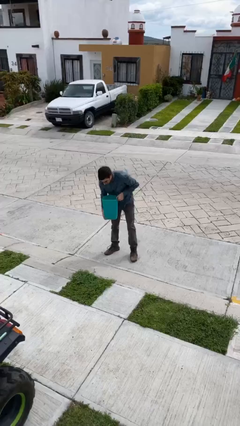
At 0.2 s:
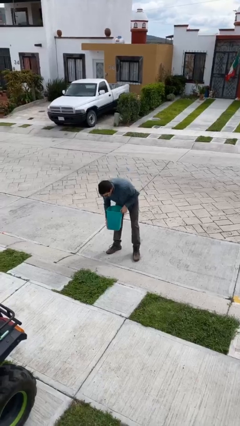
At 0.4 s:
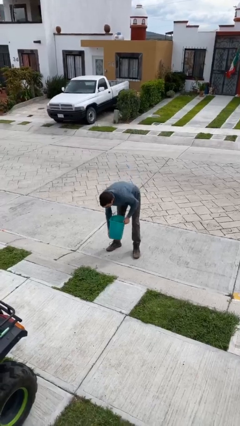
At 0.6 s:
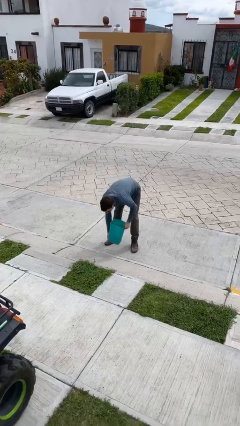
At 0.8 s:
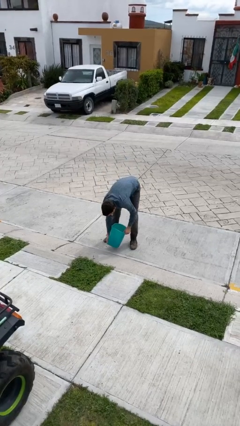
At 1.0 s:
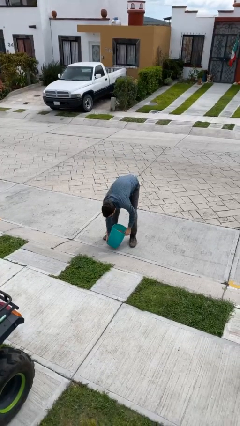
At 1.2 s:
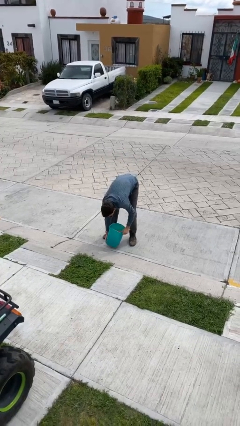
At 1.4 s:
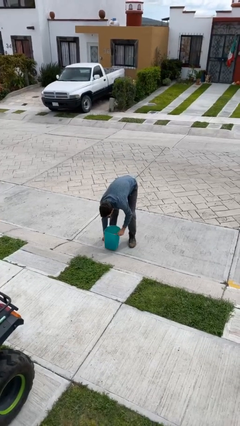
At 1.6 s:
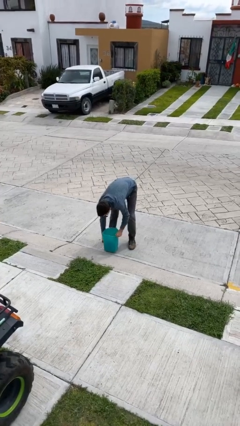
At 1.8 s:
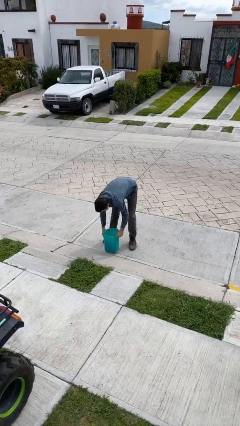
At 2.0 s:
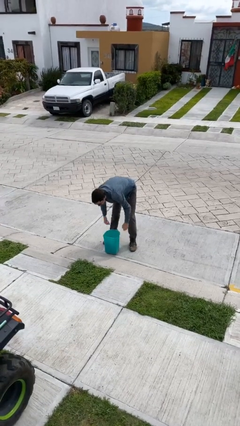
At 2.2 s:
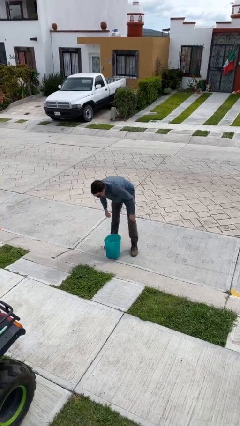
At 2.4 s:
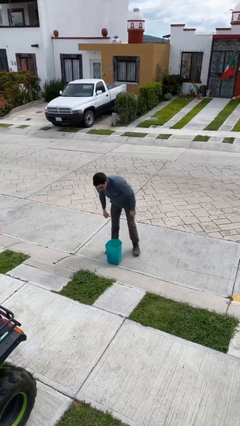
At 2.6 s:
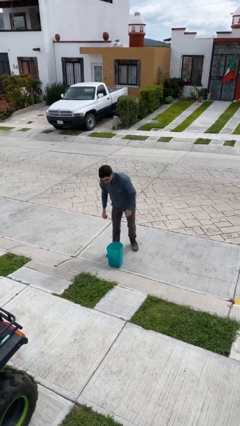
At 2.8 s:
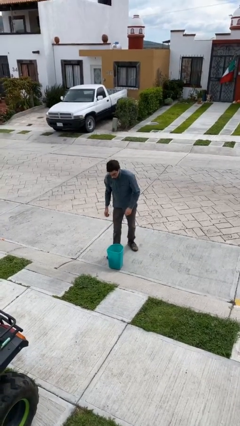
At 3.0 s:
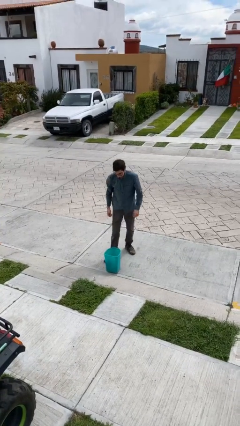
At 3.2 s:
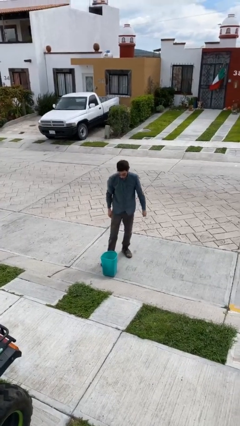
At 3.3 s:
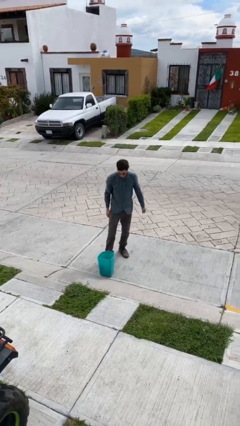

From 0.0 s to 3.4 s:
person puts down object on floor

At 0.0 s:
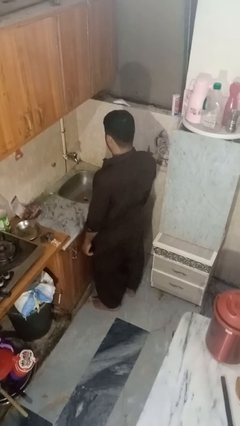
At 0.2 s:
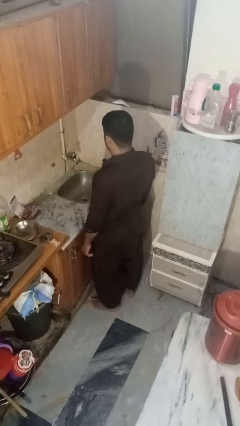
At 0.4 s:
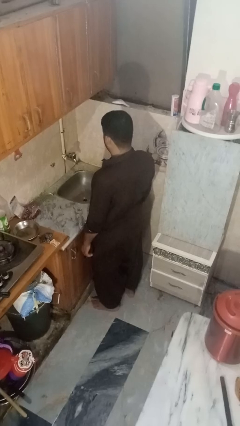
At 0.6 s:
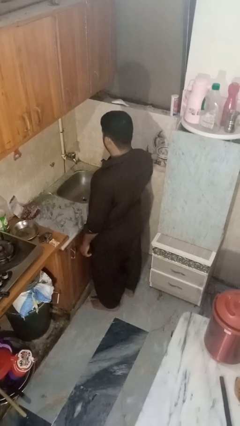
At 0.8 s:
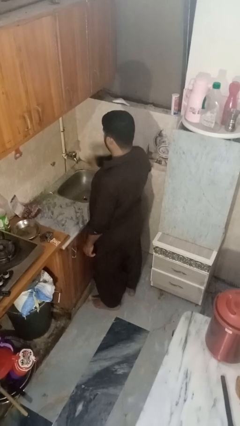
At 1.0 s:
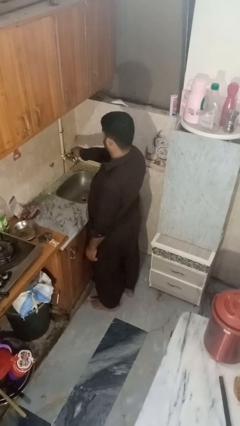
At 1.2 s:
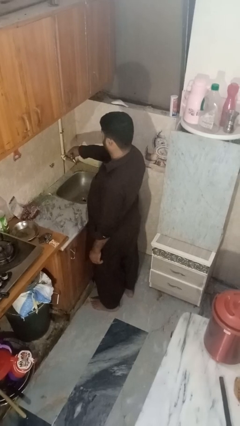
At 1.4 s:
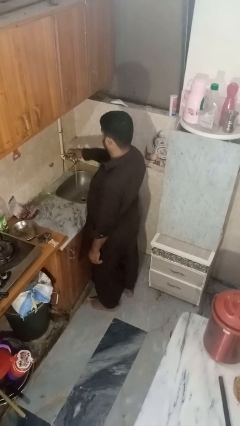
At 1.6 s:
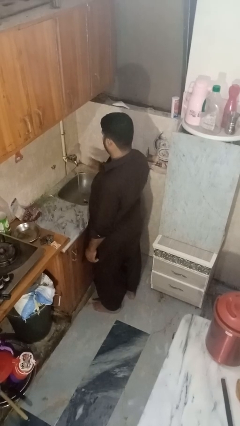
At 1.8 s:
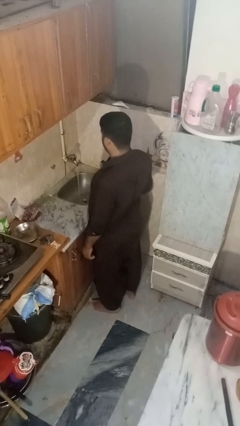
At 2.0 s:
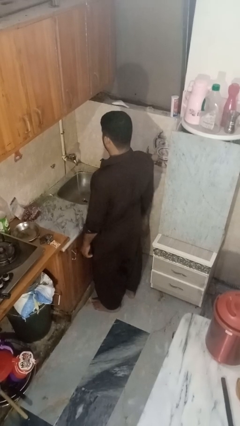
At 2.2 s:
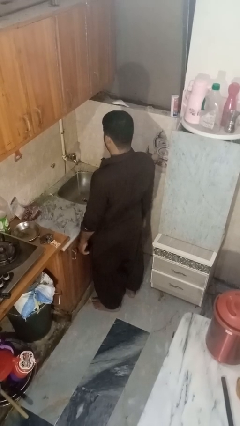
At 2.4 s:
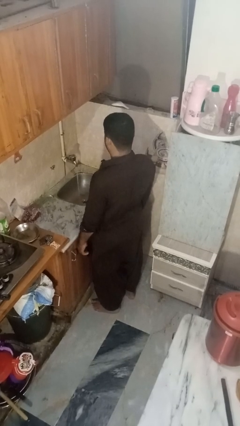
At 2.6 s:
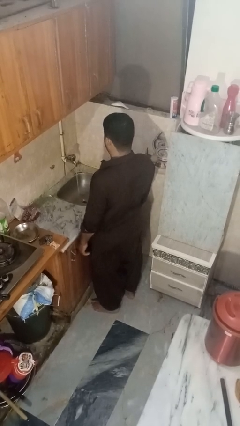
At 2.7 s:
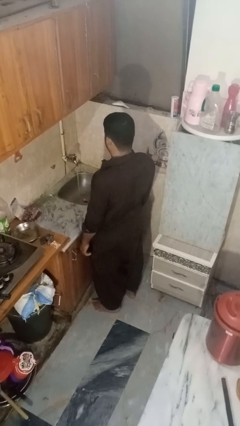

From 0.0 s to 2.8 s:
person turns on faucet

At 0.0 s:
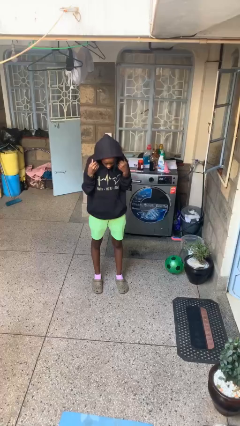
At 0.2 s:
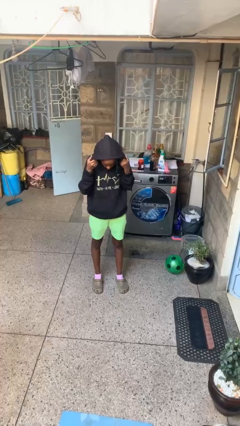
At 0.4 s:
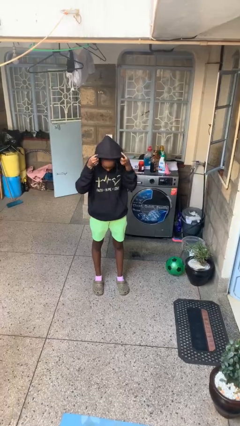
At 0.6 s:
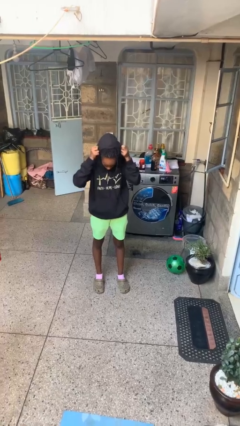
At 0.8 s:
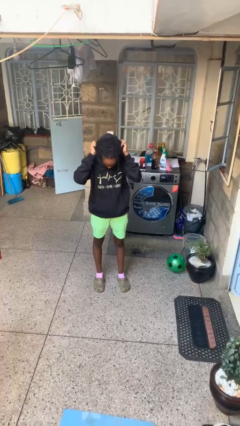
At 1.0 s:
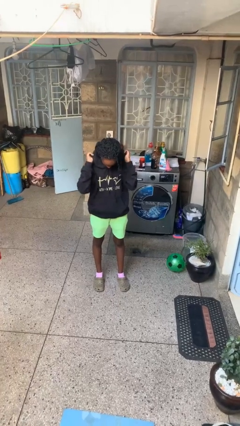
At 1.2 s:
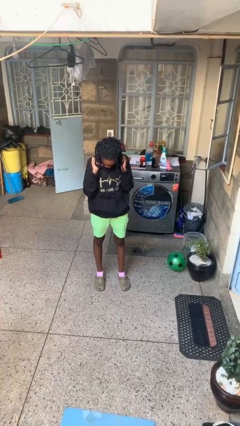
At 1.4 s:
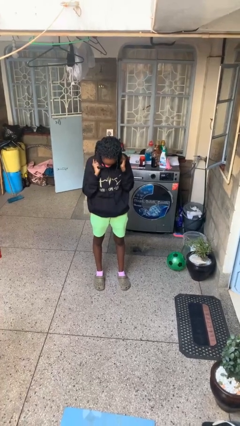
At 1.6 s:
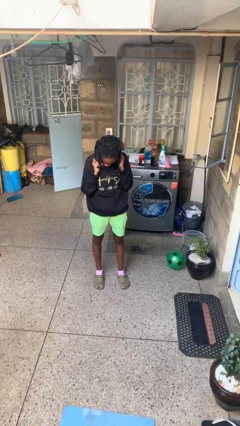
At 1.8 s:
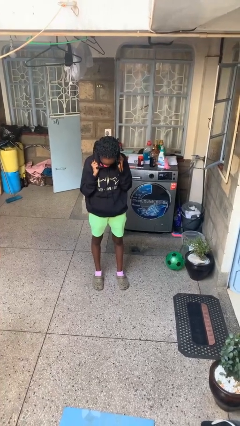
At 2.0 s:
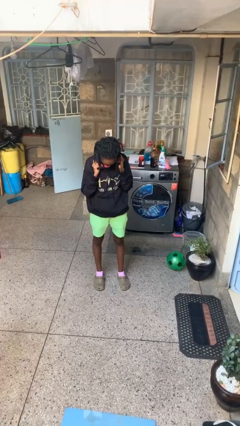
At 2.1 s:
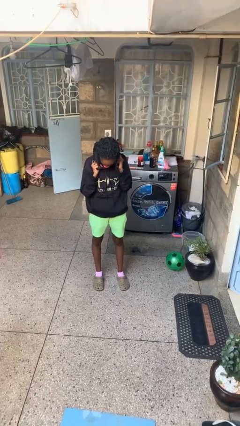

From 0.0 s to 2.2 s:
person takes off hoodie

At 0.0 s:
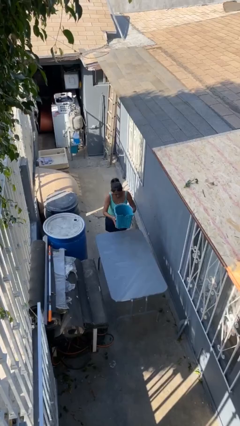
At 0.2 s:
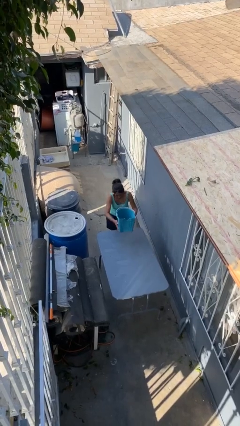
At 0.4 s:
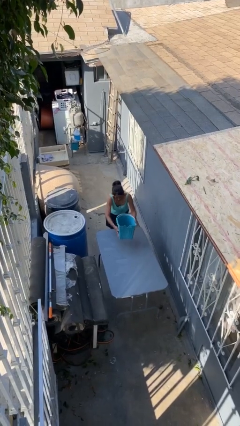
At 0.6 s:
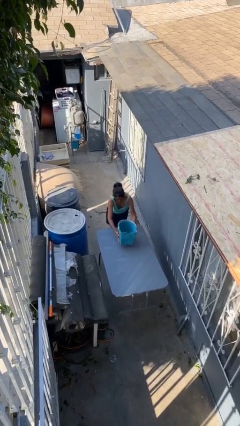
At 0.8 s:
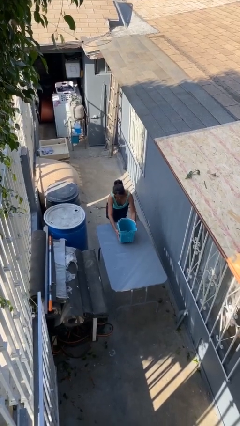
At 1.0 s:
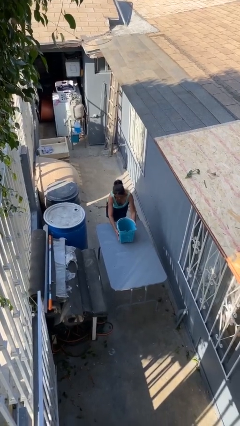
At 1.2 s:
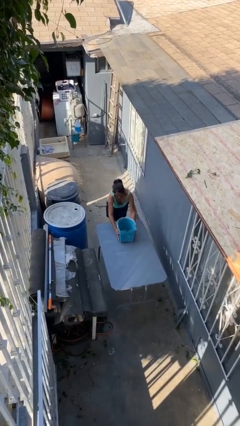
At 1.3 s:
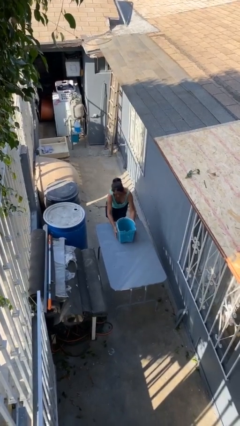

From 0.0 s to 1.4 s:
person puts down object on table

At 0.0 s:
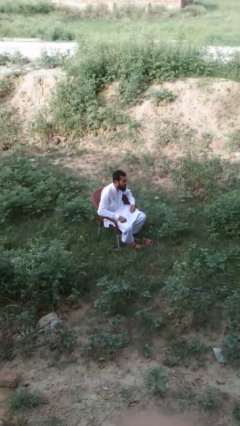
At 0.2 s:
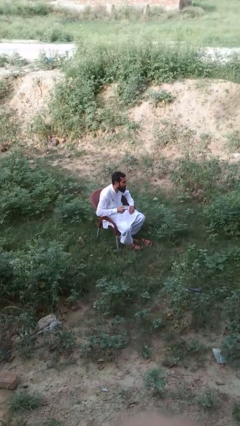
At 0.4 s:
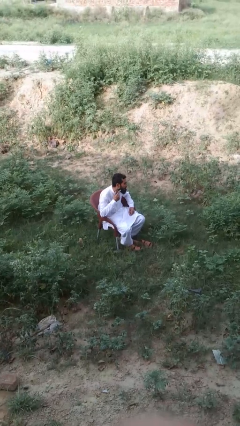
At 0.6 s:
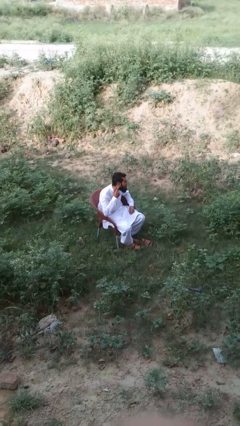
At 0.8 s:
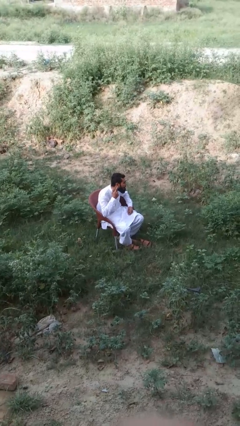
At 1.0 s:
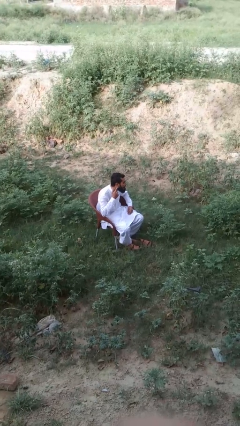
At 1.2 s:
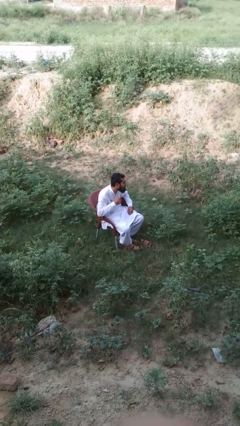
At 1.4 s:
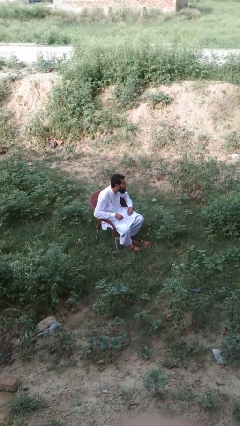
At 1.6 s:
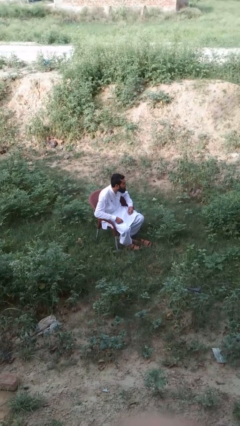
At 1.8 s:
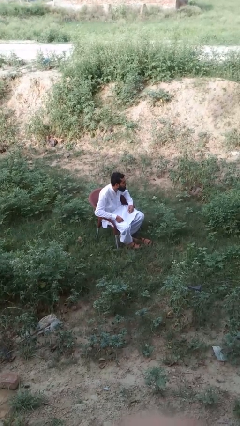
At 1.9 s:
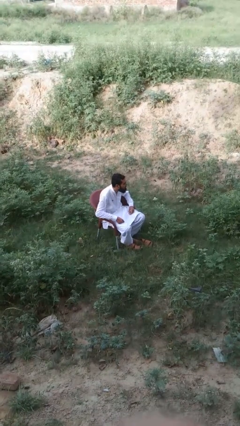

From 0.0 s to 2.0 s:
person touches earlobe

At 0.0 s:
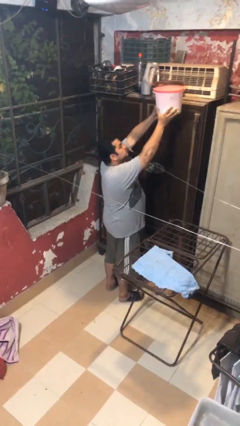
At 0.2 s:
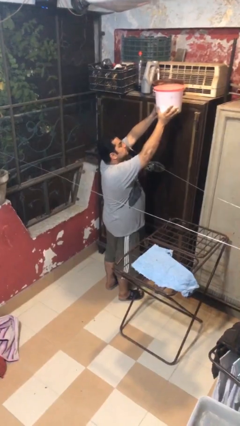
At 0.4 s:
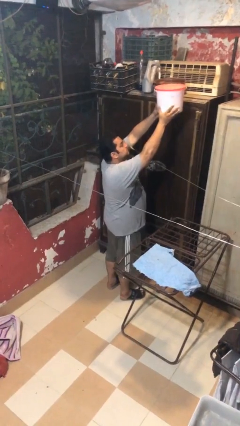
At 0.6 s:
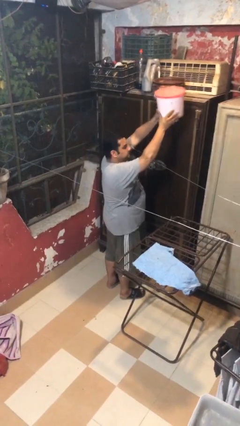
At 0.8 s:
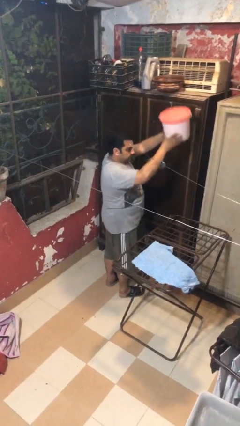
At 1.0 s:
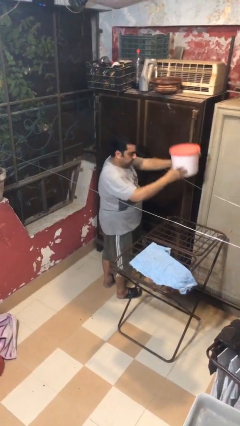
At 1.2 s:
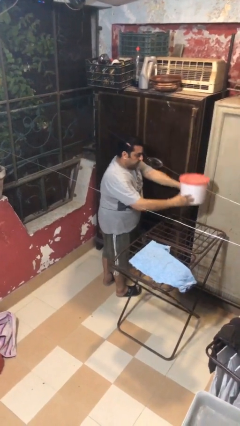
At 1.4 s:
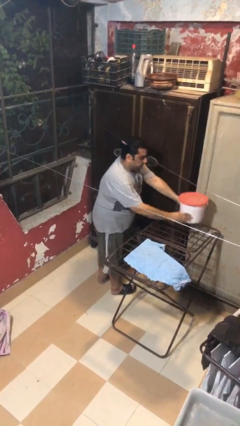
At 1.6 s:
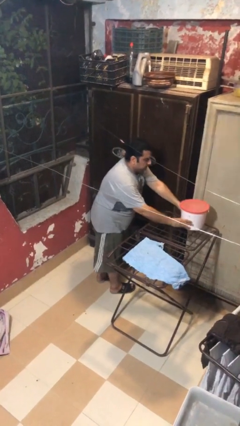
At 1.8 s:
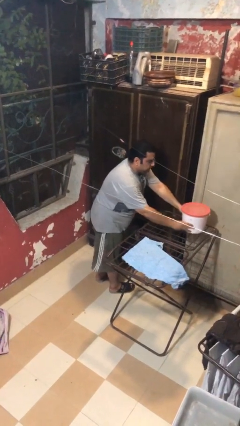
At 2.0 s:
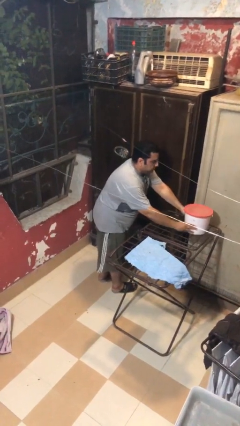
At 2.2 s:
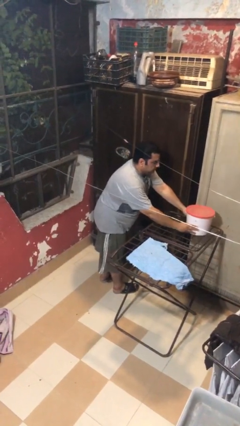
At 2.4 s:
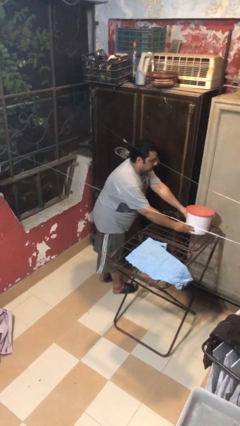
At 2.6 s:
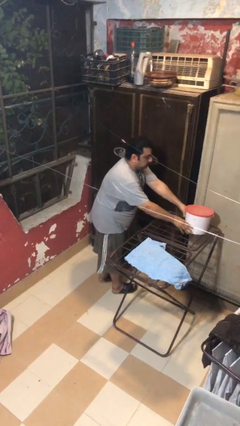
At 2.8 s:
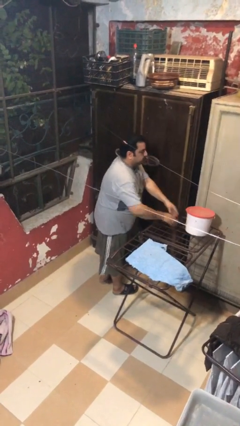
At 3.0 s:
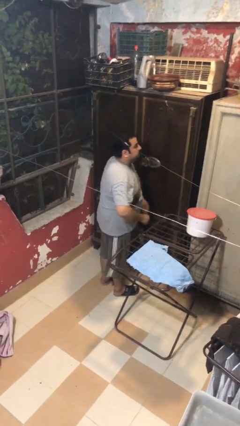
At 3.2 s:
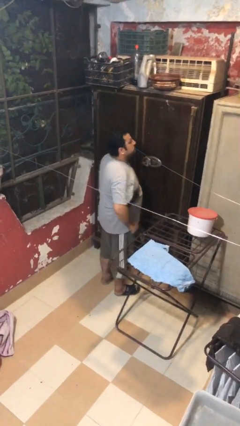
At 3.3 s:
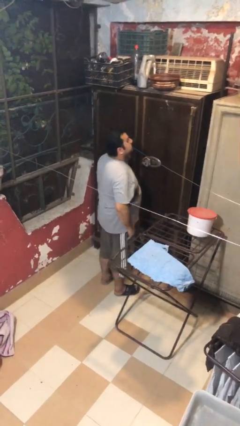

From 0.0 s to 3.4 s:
person puts down object on shelf

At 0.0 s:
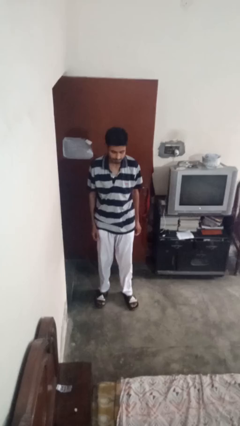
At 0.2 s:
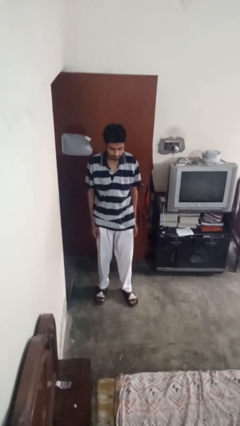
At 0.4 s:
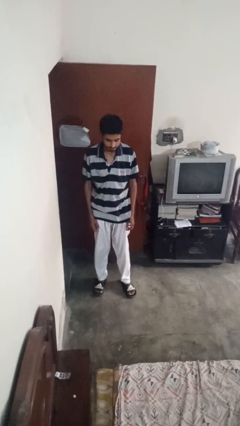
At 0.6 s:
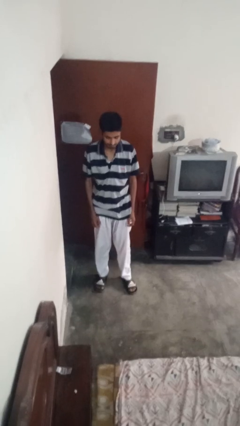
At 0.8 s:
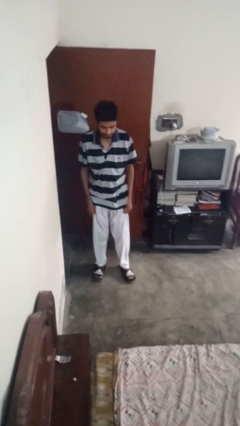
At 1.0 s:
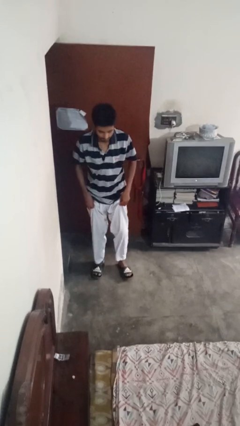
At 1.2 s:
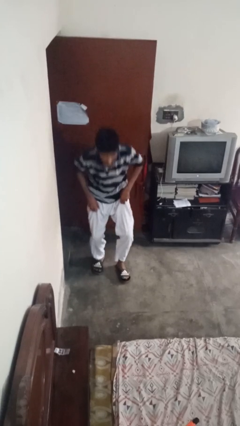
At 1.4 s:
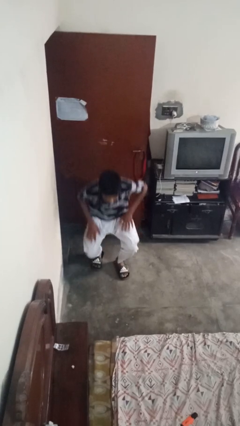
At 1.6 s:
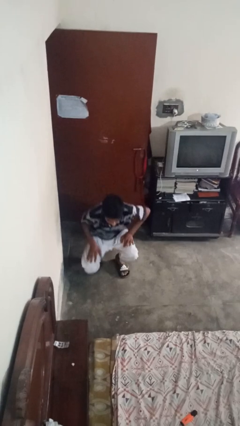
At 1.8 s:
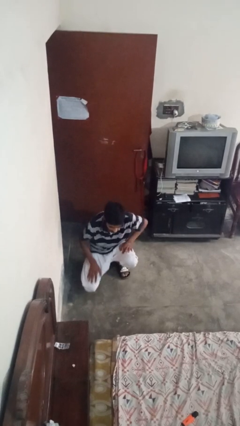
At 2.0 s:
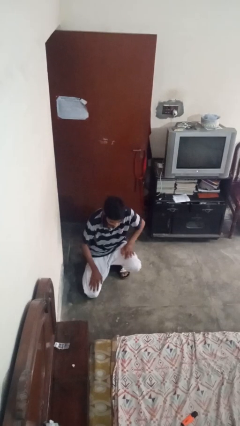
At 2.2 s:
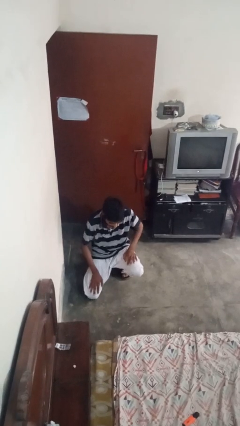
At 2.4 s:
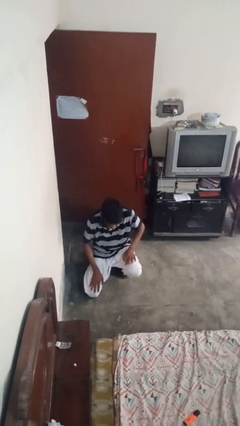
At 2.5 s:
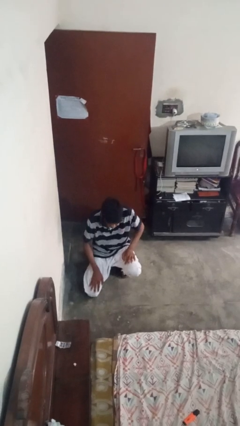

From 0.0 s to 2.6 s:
person kneels
